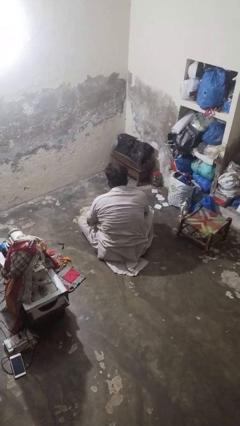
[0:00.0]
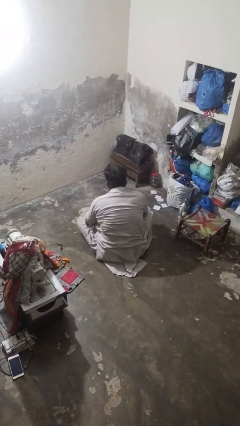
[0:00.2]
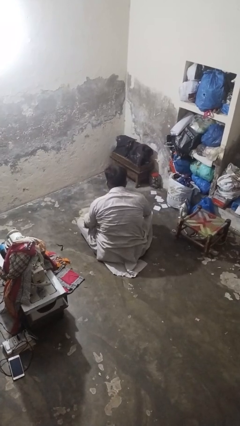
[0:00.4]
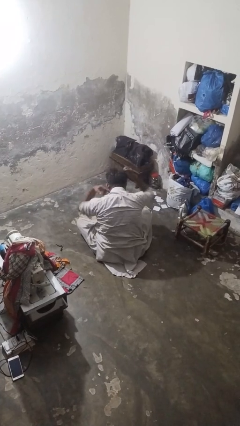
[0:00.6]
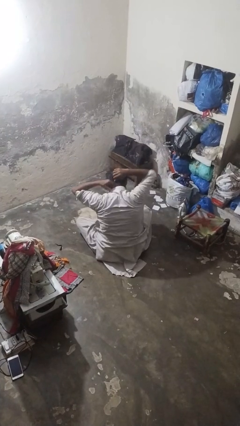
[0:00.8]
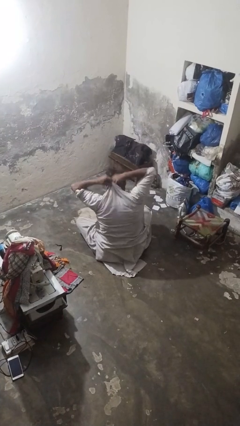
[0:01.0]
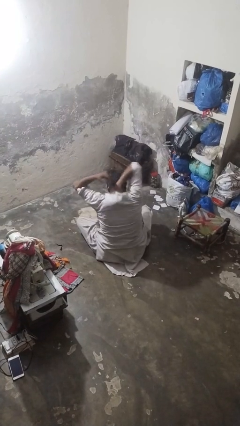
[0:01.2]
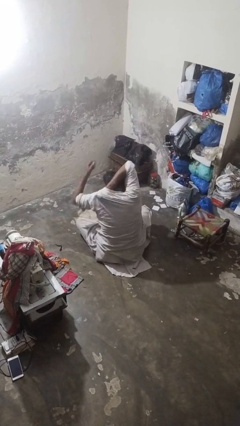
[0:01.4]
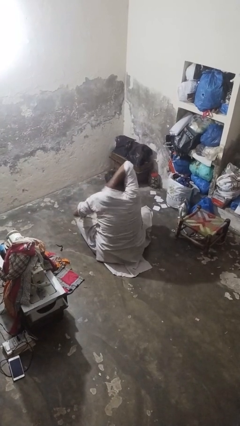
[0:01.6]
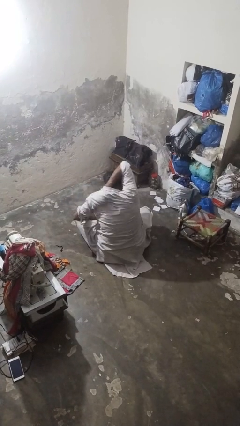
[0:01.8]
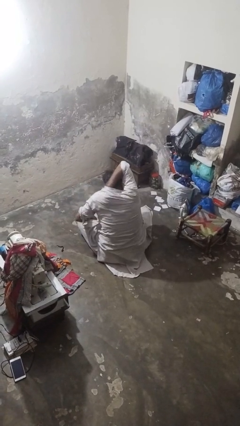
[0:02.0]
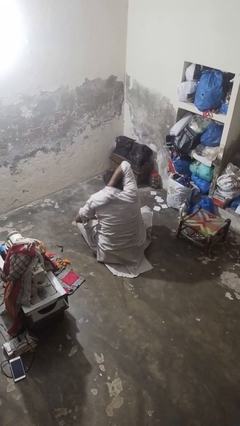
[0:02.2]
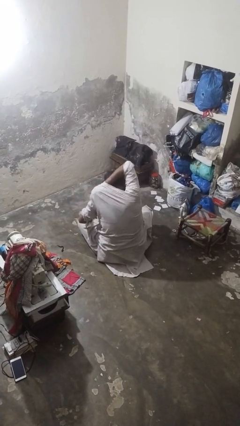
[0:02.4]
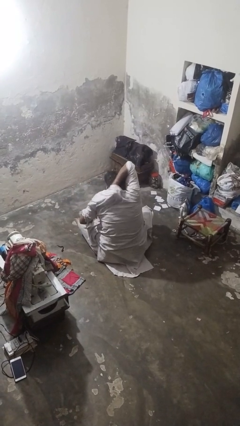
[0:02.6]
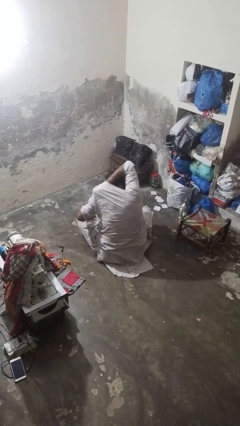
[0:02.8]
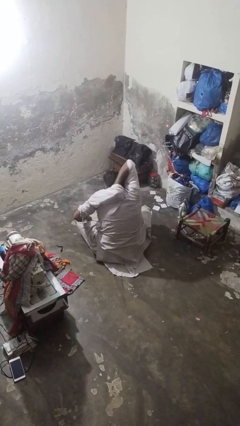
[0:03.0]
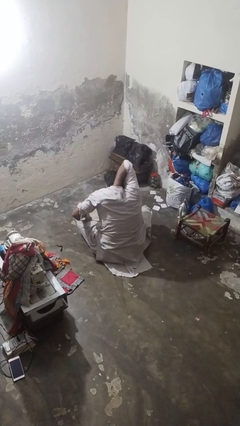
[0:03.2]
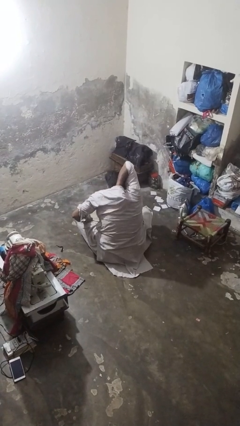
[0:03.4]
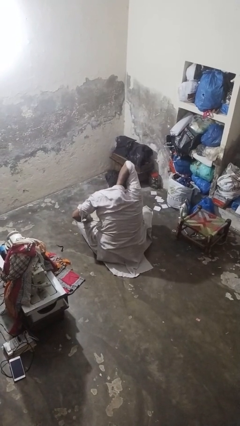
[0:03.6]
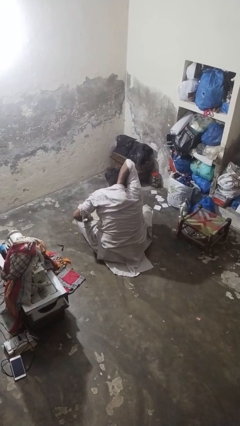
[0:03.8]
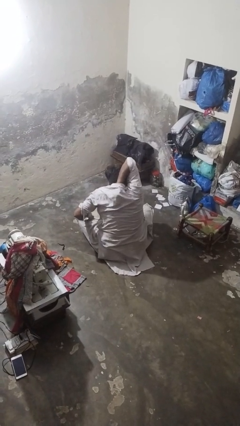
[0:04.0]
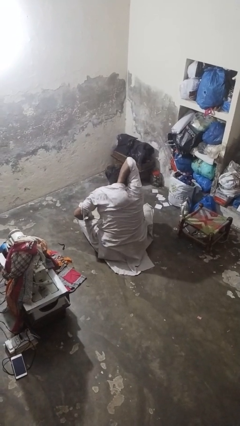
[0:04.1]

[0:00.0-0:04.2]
person swats bug

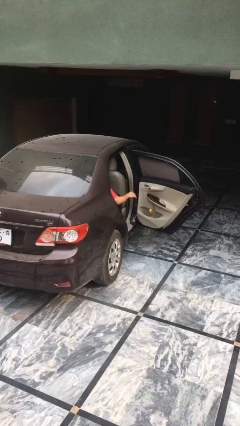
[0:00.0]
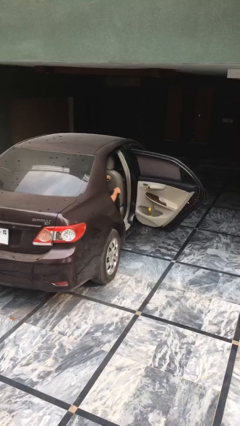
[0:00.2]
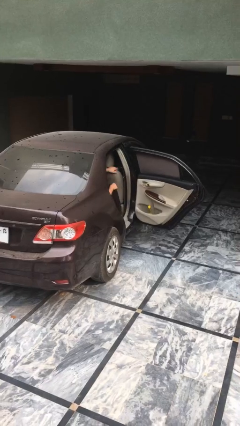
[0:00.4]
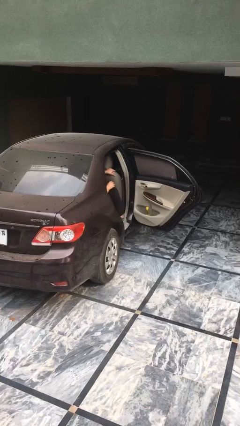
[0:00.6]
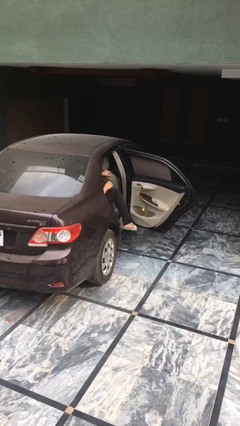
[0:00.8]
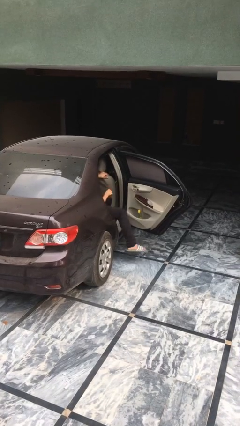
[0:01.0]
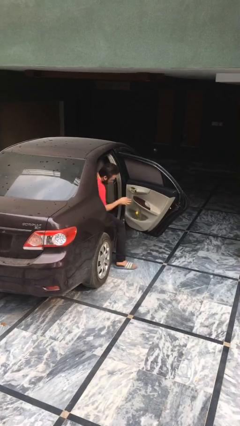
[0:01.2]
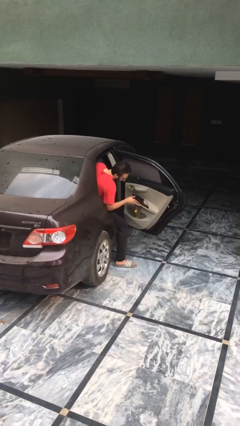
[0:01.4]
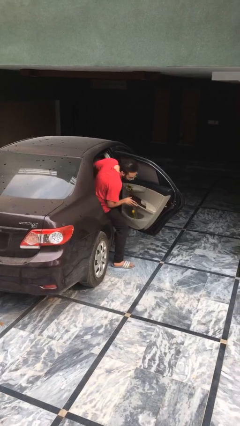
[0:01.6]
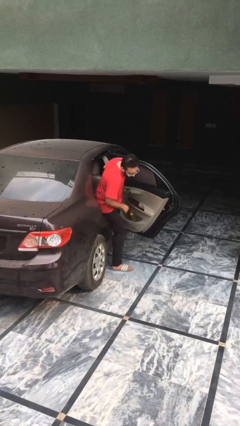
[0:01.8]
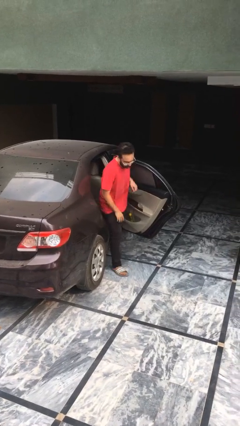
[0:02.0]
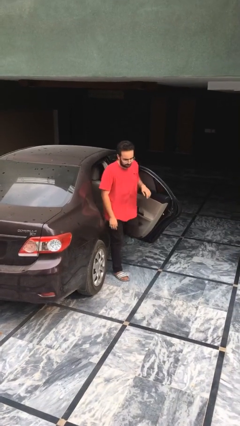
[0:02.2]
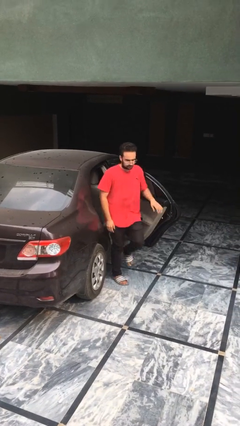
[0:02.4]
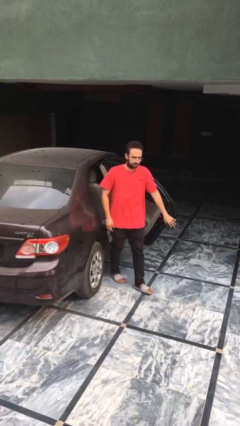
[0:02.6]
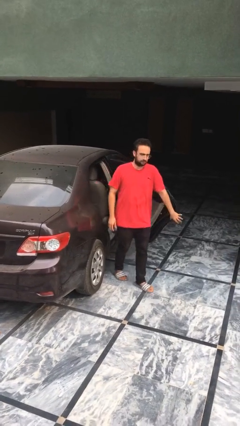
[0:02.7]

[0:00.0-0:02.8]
person exits car

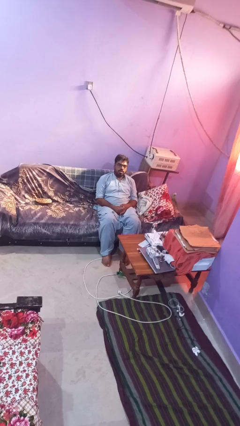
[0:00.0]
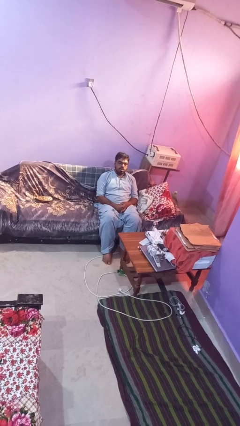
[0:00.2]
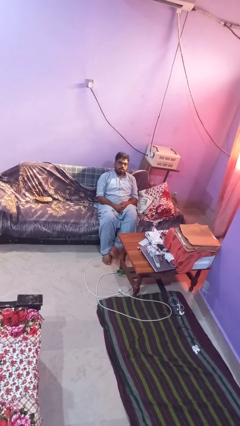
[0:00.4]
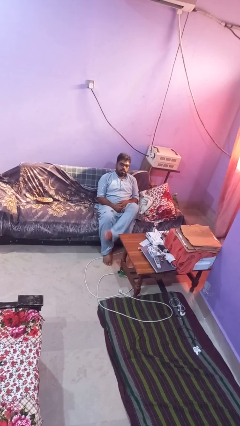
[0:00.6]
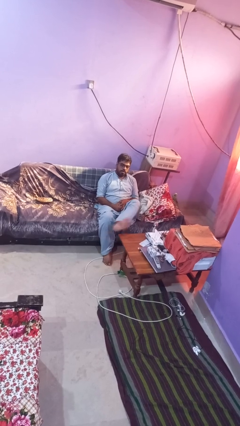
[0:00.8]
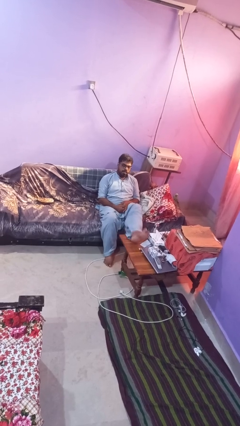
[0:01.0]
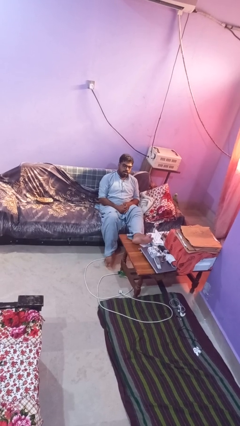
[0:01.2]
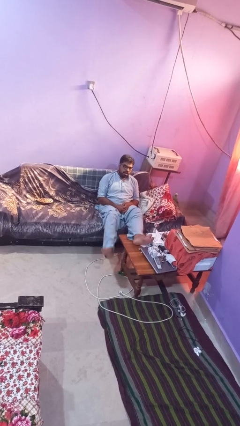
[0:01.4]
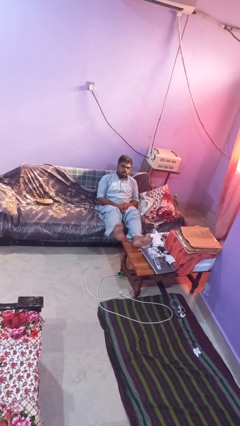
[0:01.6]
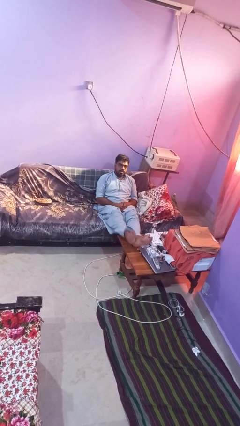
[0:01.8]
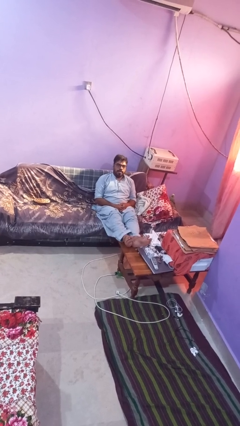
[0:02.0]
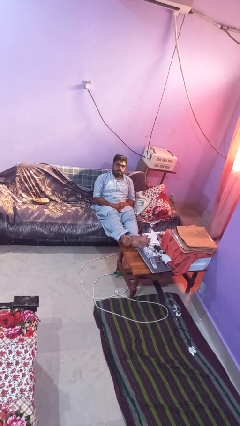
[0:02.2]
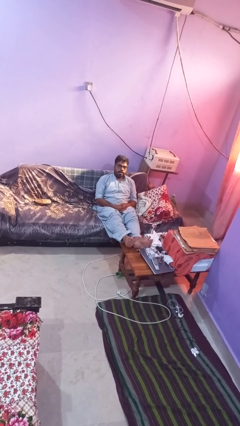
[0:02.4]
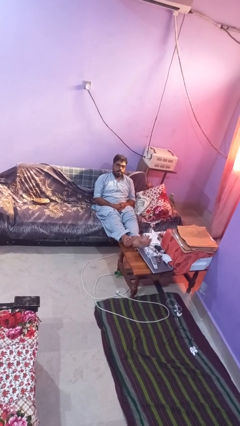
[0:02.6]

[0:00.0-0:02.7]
person puts feet up

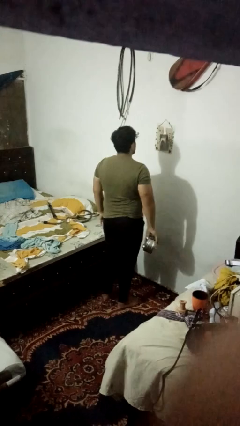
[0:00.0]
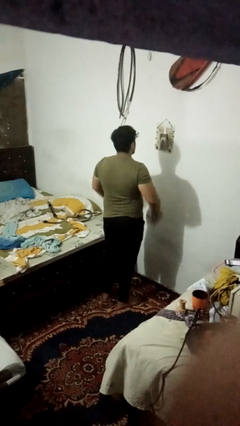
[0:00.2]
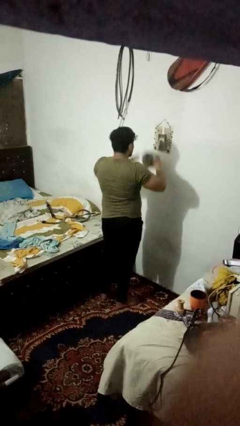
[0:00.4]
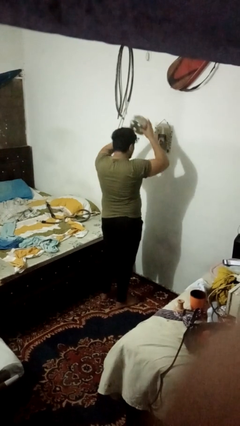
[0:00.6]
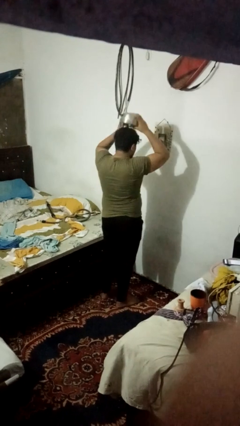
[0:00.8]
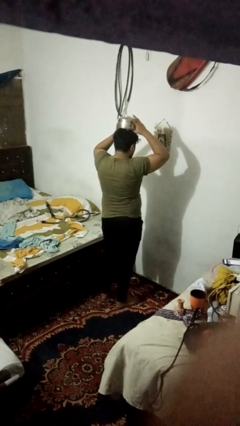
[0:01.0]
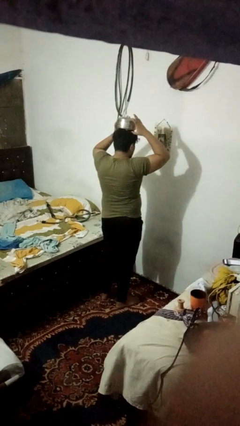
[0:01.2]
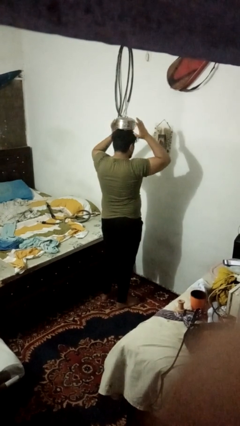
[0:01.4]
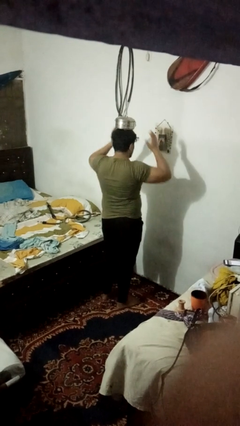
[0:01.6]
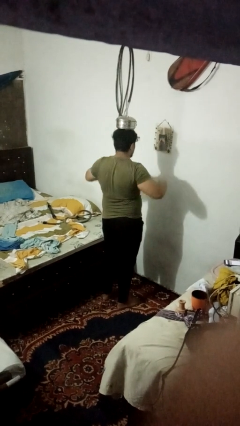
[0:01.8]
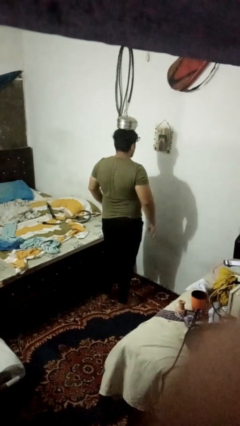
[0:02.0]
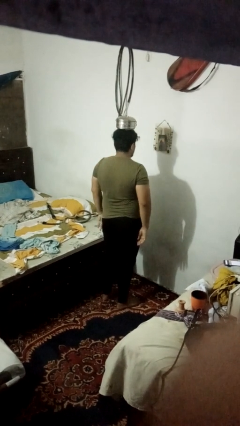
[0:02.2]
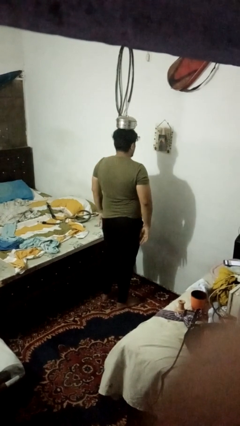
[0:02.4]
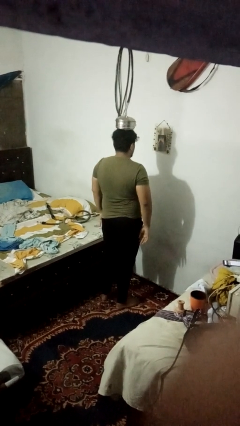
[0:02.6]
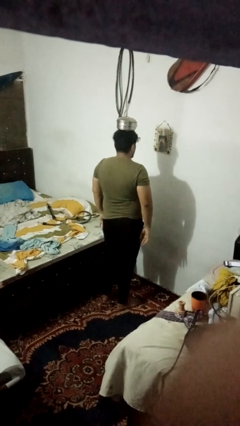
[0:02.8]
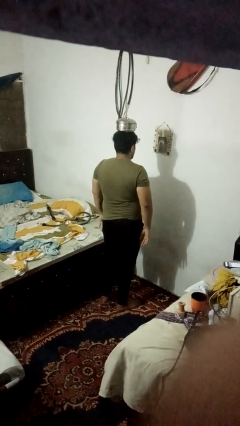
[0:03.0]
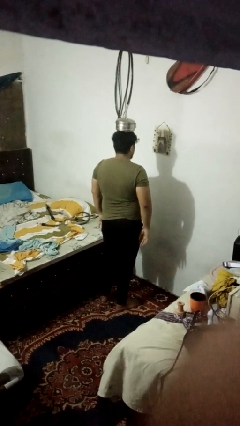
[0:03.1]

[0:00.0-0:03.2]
person holds object above head

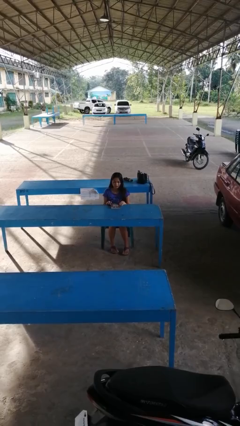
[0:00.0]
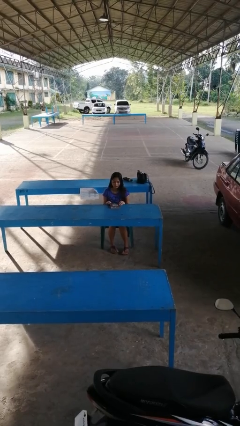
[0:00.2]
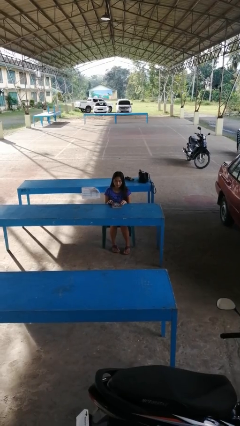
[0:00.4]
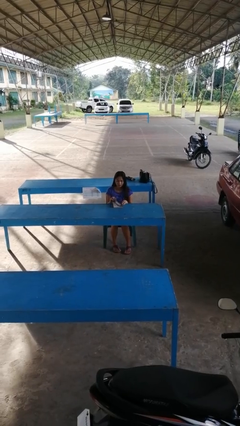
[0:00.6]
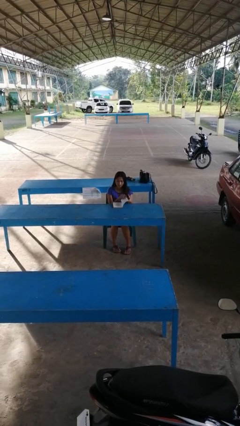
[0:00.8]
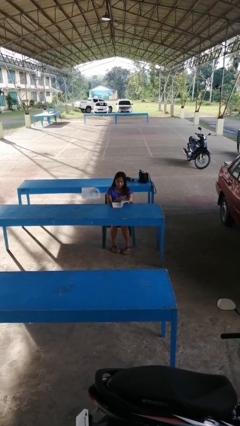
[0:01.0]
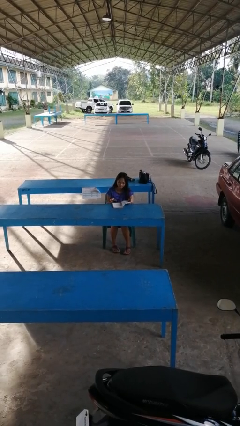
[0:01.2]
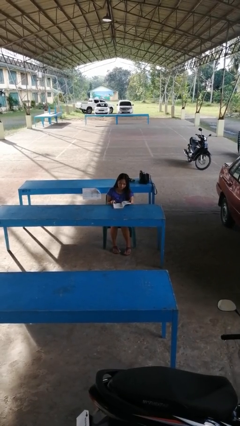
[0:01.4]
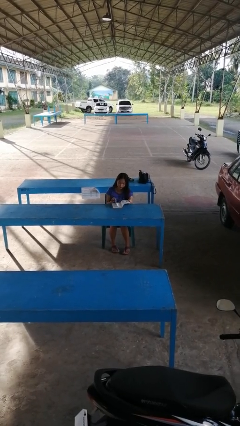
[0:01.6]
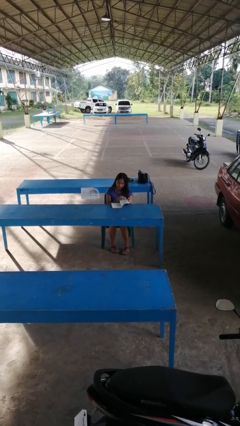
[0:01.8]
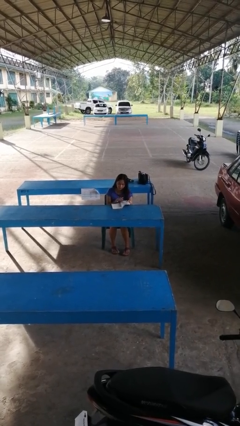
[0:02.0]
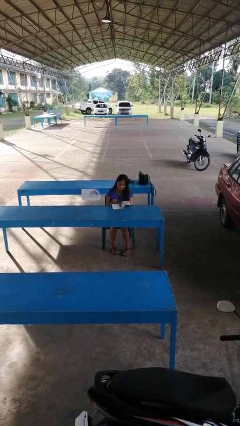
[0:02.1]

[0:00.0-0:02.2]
person reads book

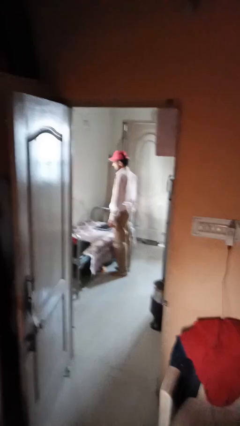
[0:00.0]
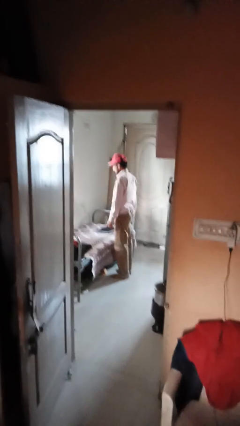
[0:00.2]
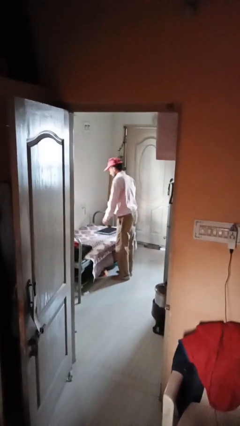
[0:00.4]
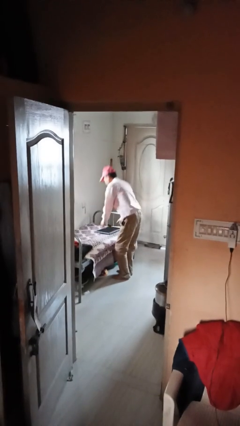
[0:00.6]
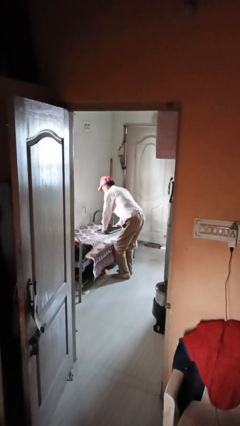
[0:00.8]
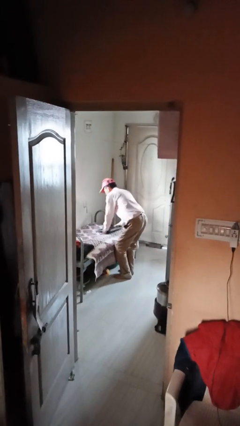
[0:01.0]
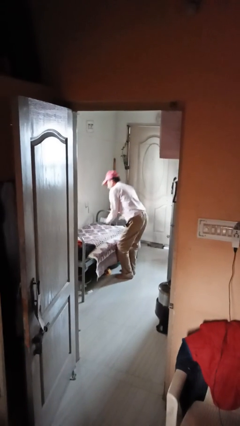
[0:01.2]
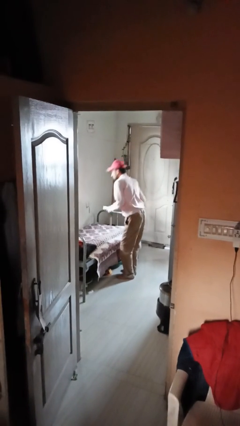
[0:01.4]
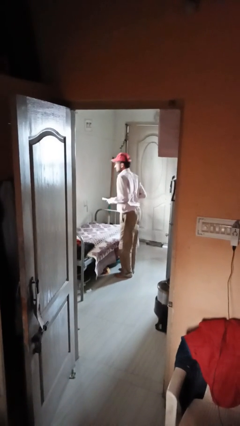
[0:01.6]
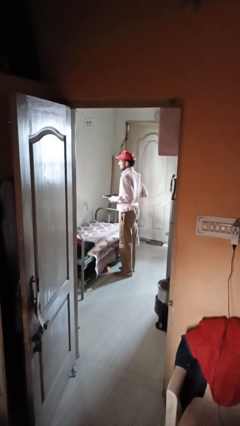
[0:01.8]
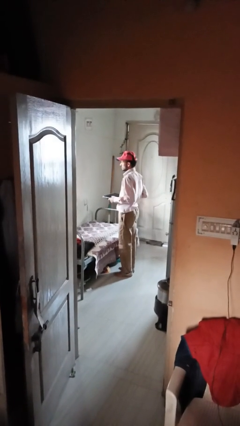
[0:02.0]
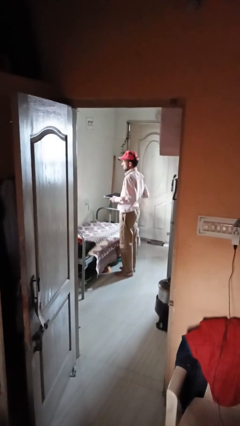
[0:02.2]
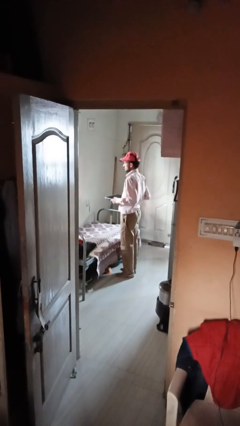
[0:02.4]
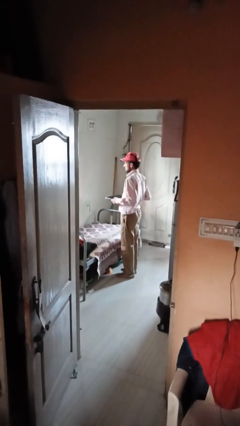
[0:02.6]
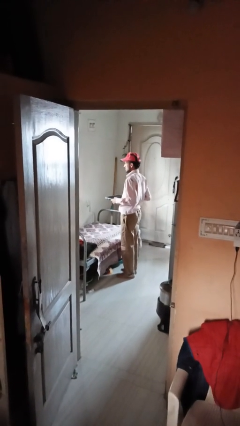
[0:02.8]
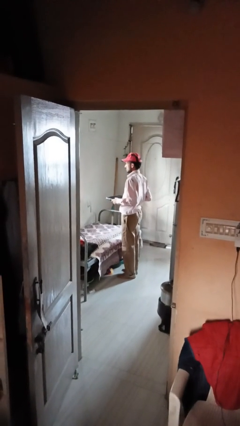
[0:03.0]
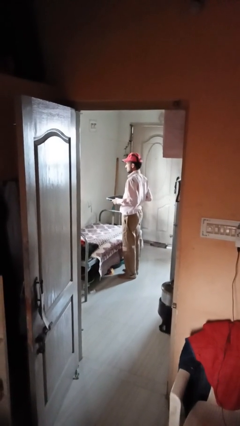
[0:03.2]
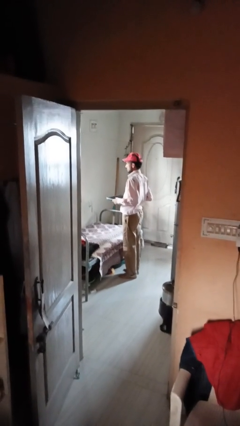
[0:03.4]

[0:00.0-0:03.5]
person picks up object from couch
